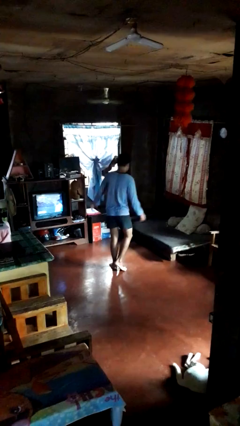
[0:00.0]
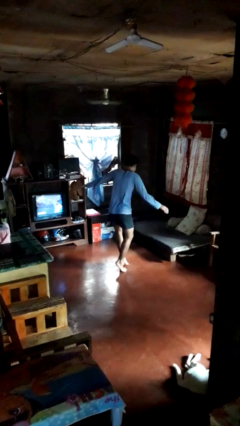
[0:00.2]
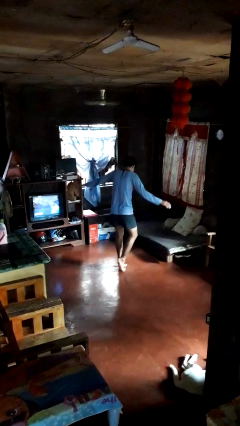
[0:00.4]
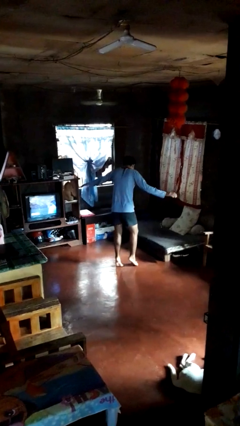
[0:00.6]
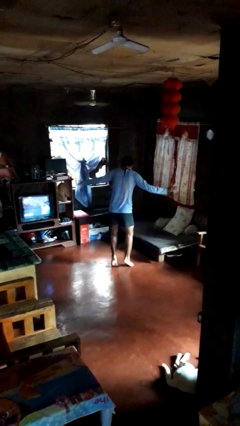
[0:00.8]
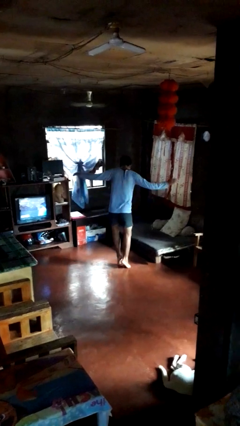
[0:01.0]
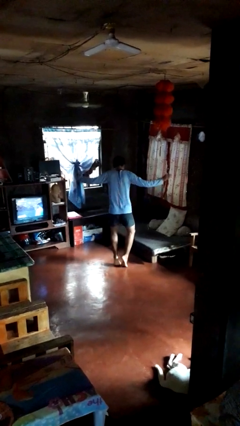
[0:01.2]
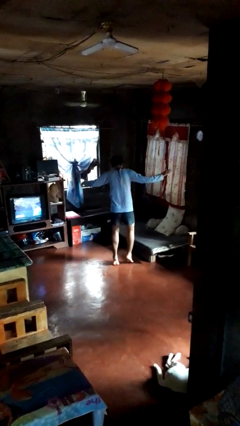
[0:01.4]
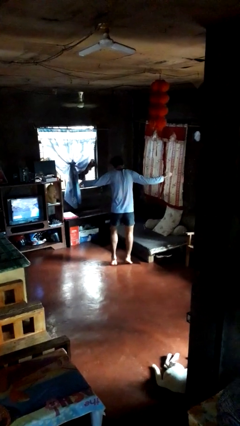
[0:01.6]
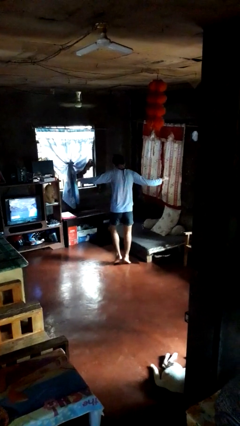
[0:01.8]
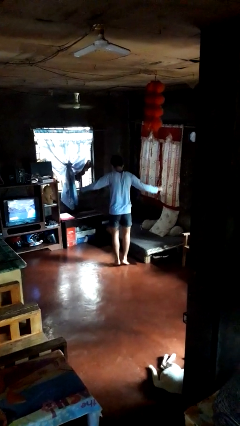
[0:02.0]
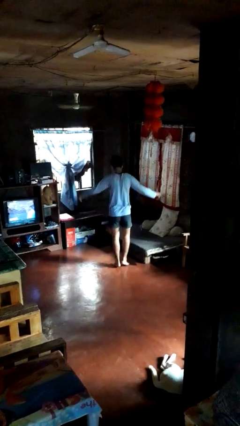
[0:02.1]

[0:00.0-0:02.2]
person walks tiptoe

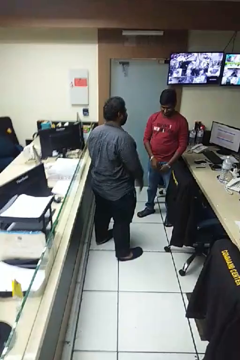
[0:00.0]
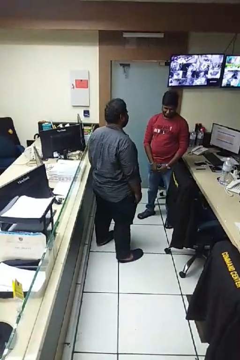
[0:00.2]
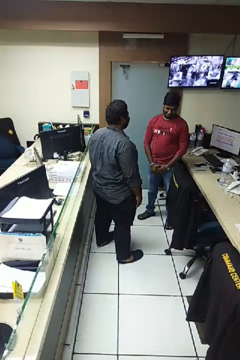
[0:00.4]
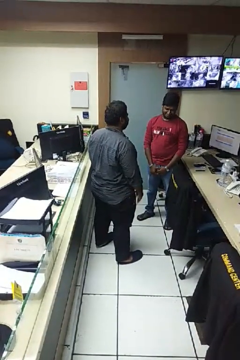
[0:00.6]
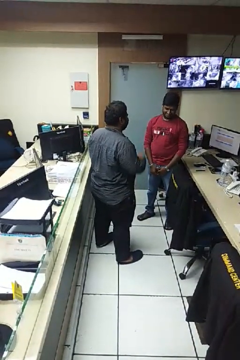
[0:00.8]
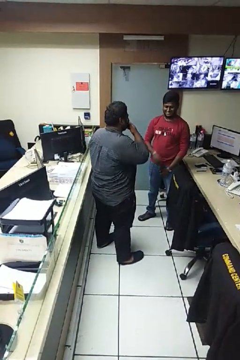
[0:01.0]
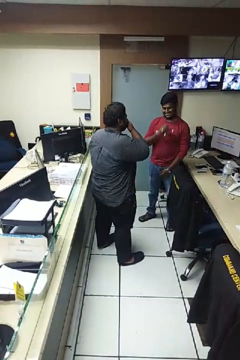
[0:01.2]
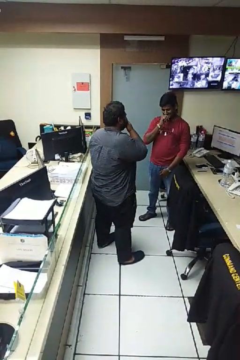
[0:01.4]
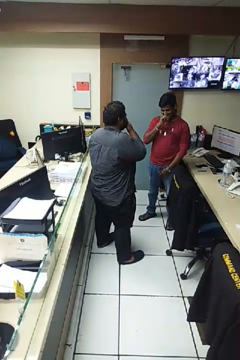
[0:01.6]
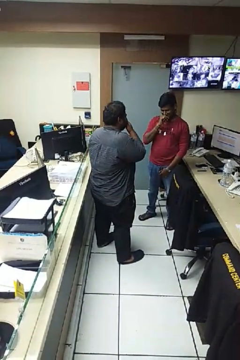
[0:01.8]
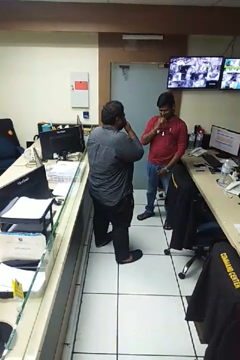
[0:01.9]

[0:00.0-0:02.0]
person laughs with person

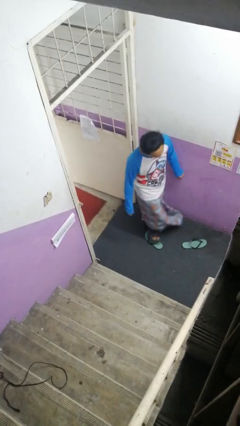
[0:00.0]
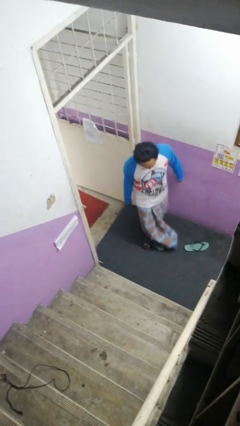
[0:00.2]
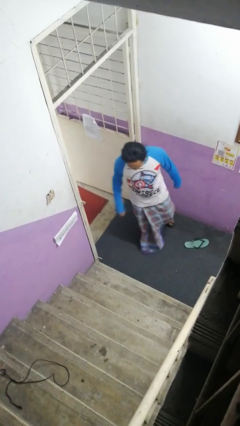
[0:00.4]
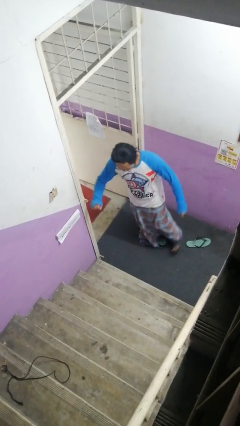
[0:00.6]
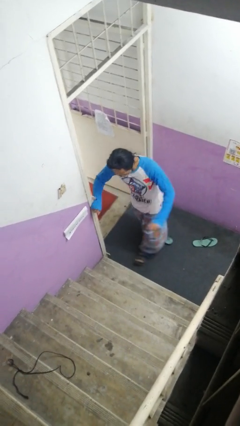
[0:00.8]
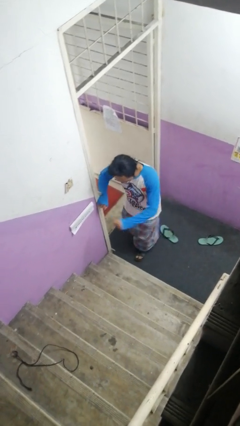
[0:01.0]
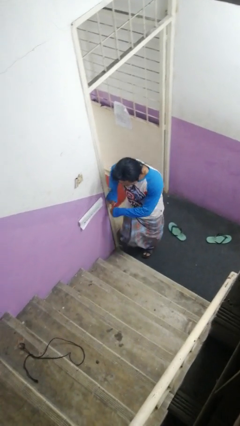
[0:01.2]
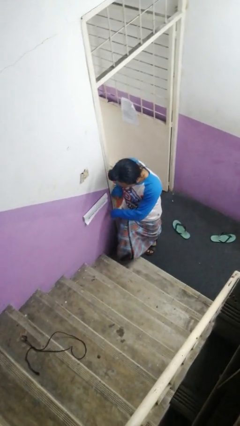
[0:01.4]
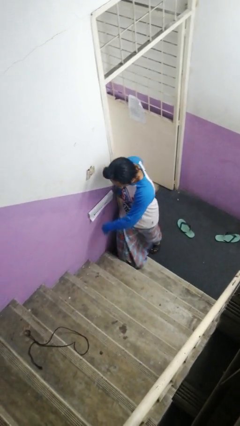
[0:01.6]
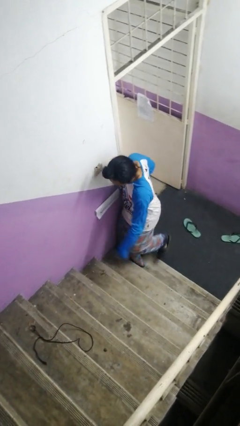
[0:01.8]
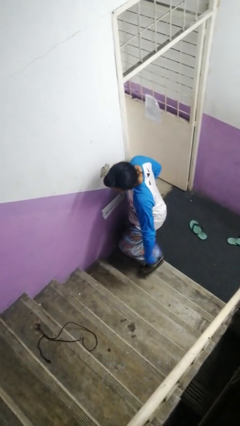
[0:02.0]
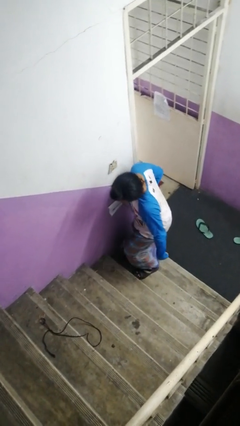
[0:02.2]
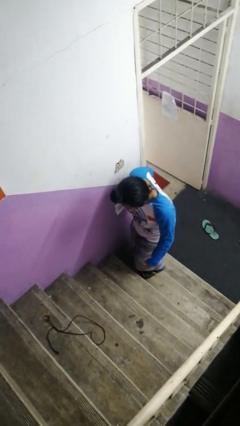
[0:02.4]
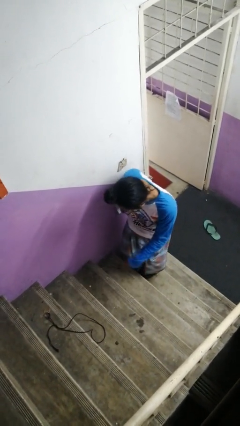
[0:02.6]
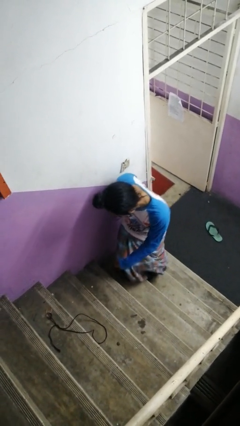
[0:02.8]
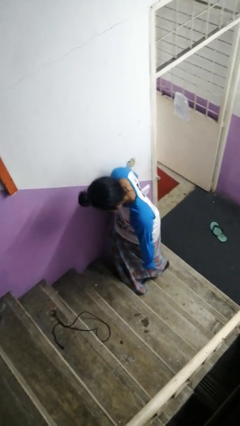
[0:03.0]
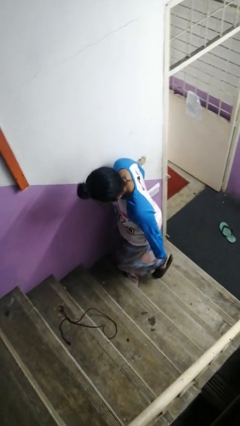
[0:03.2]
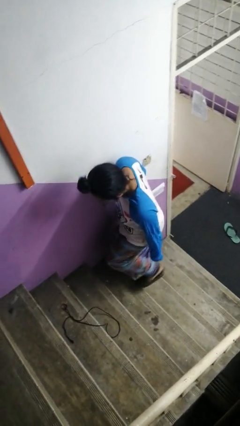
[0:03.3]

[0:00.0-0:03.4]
person climbs up stairs

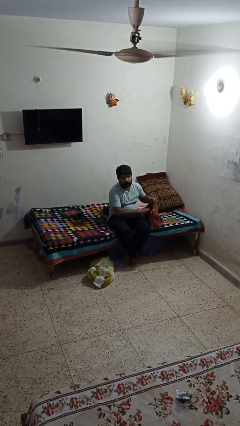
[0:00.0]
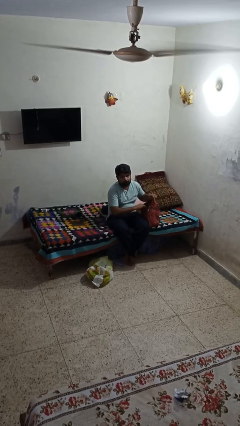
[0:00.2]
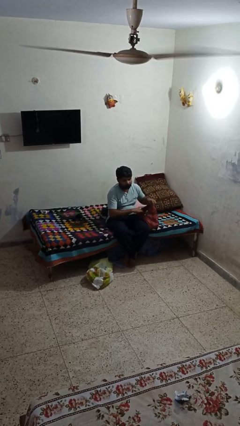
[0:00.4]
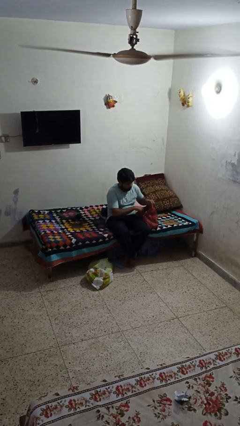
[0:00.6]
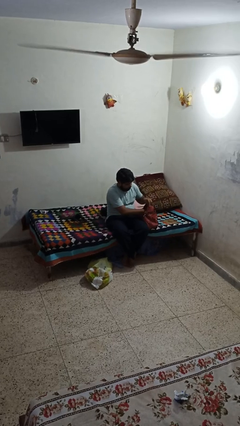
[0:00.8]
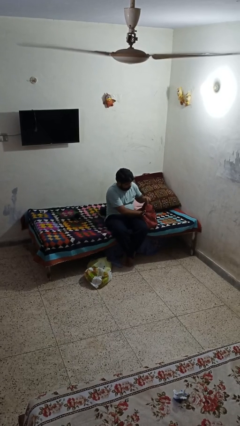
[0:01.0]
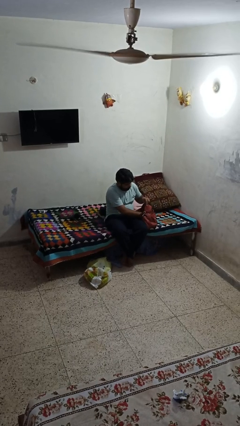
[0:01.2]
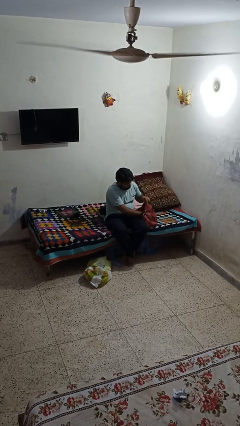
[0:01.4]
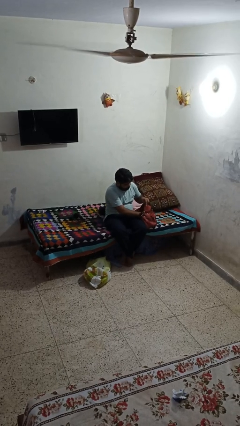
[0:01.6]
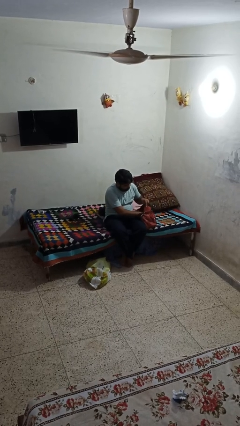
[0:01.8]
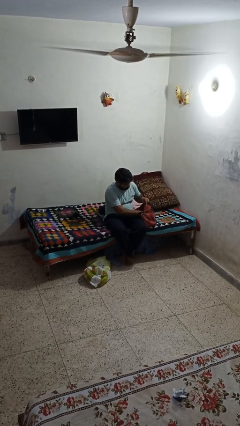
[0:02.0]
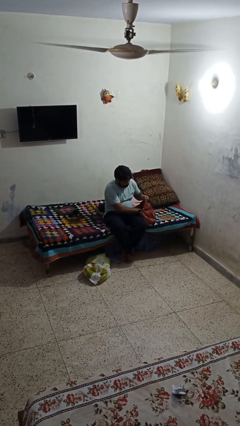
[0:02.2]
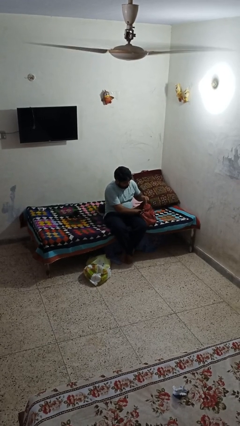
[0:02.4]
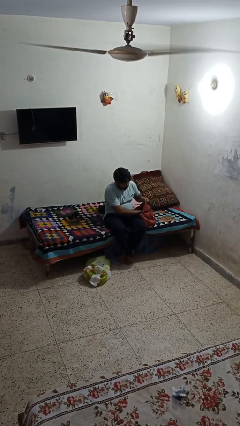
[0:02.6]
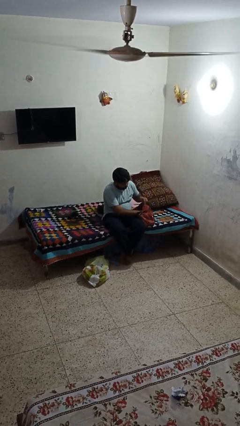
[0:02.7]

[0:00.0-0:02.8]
person searches in purse

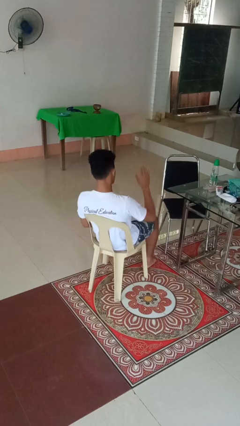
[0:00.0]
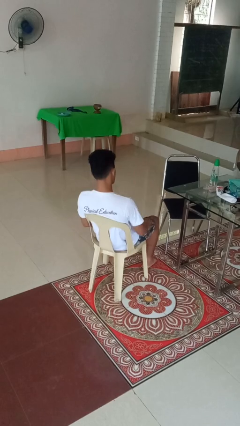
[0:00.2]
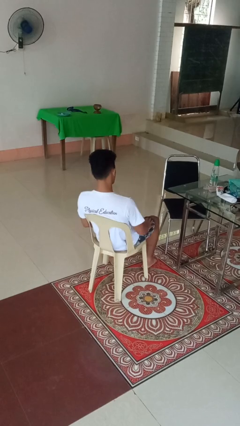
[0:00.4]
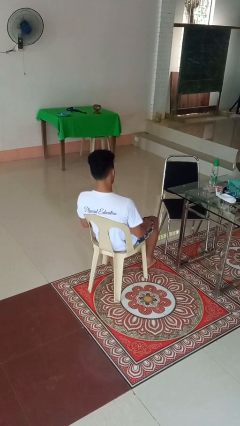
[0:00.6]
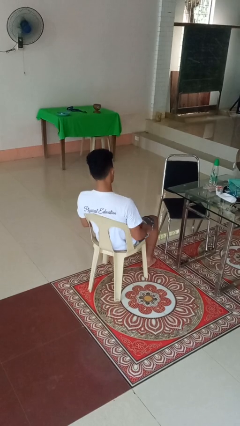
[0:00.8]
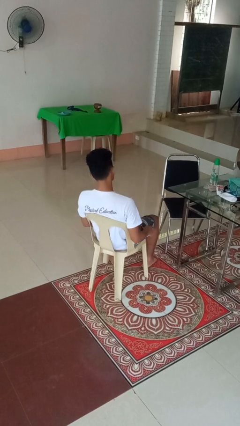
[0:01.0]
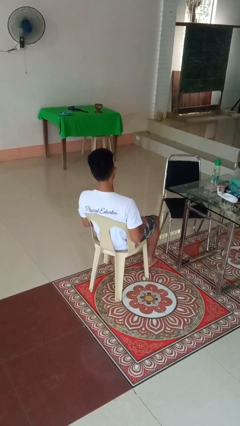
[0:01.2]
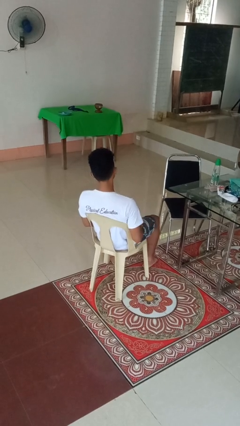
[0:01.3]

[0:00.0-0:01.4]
person slaps hands on thighs

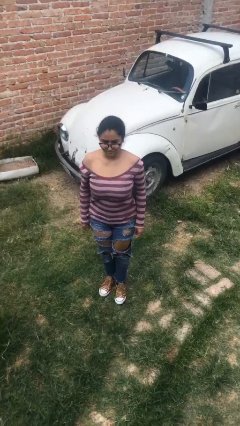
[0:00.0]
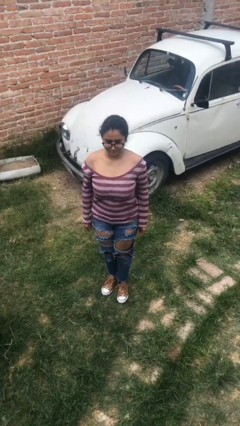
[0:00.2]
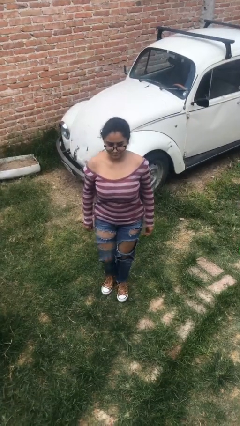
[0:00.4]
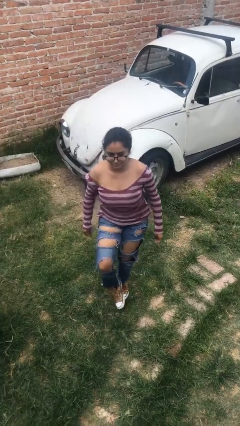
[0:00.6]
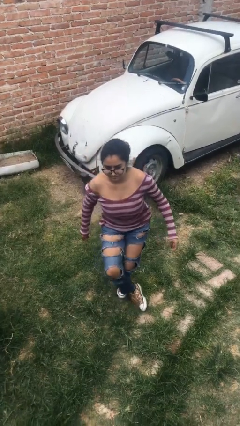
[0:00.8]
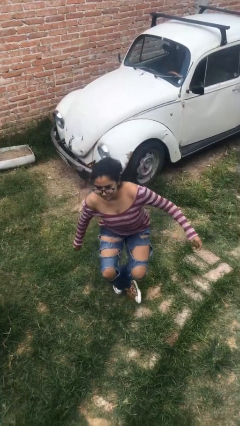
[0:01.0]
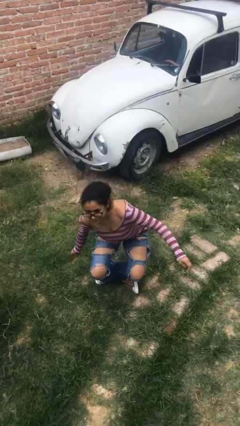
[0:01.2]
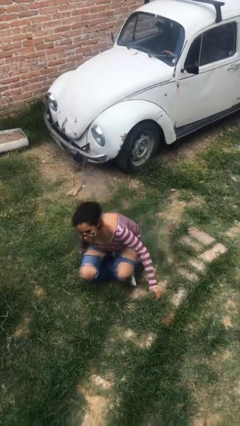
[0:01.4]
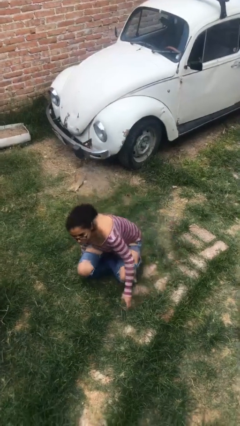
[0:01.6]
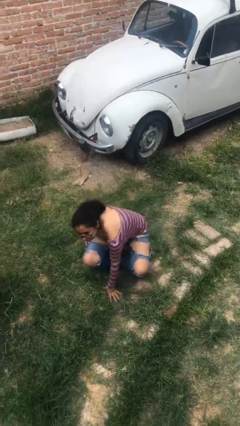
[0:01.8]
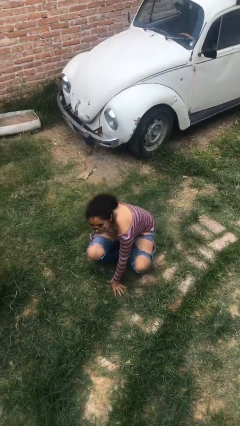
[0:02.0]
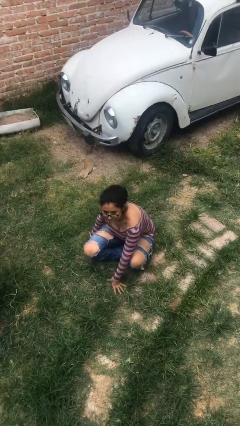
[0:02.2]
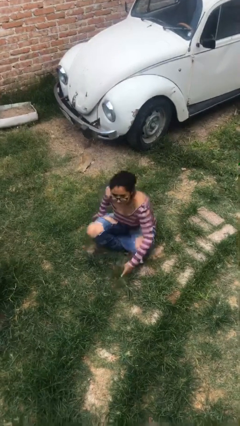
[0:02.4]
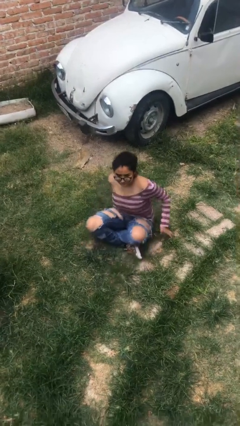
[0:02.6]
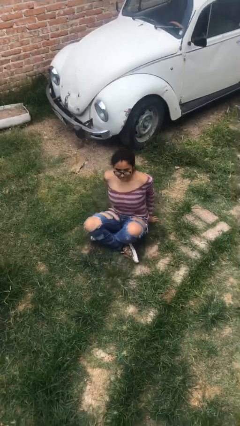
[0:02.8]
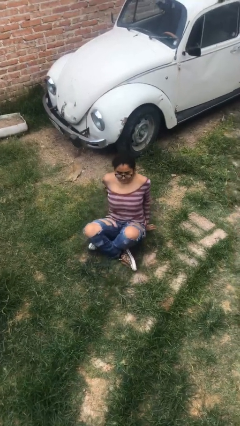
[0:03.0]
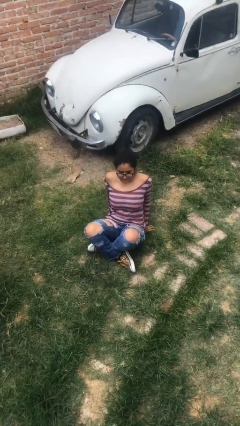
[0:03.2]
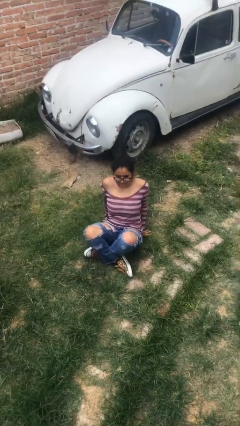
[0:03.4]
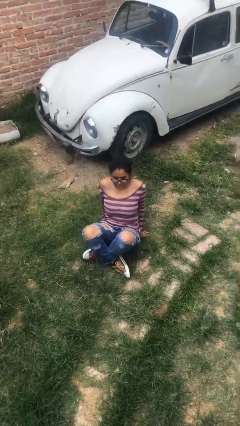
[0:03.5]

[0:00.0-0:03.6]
person sits crisscross

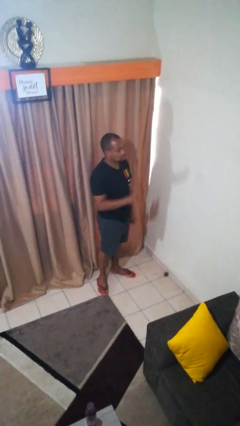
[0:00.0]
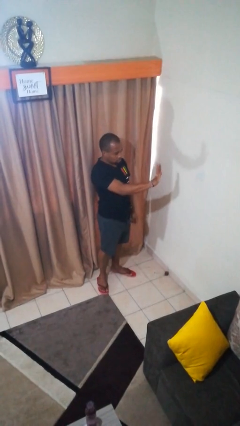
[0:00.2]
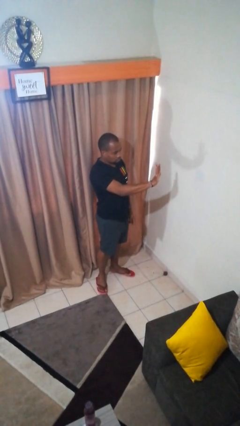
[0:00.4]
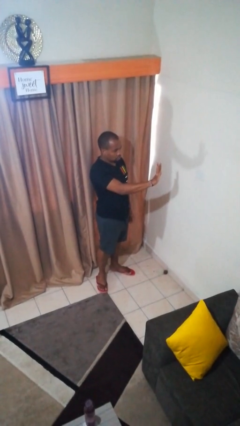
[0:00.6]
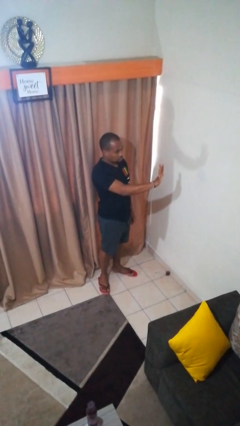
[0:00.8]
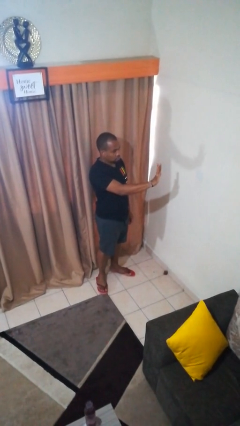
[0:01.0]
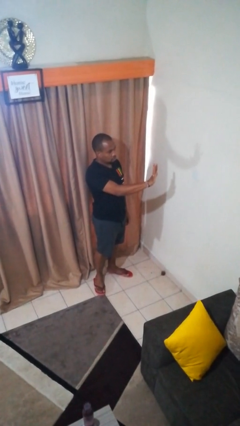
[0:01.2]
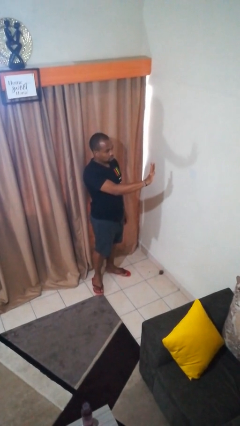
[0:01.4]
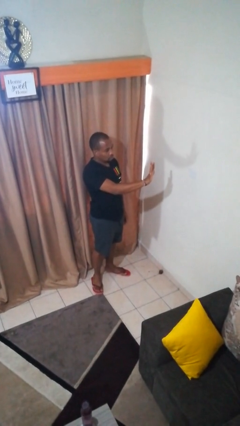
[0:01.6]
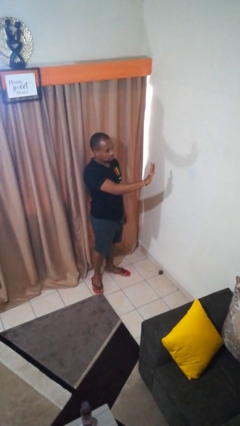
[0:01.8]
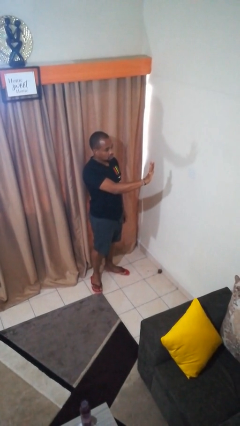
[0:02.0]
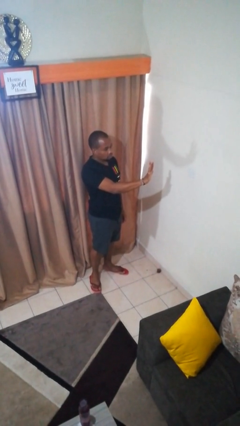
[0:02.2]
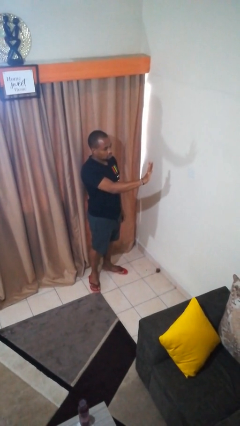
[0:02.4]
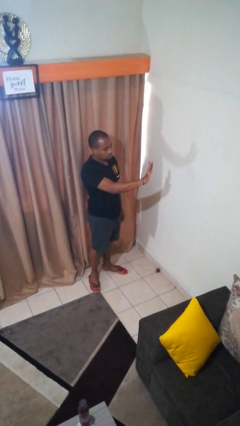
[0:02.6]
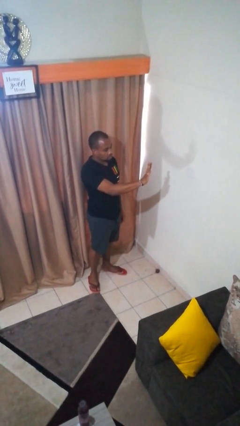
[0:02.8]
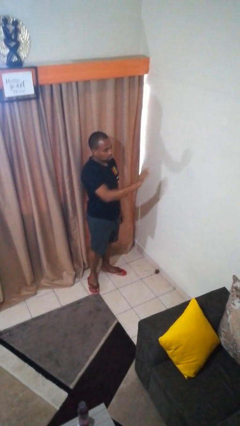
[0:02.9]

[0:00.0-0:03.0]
person gestures number five
